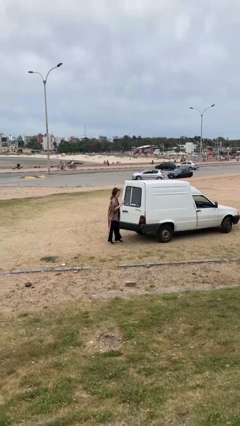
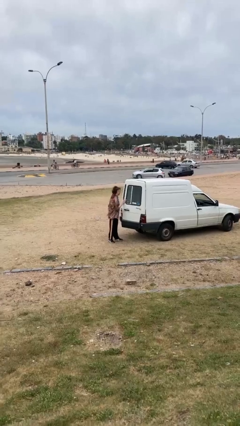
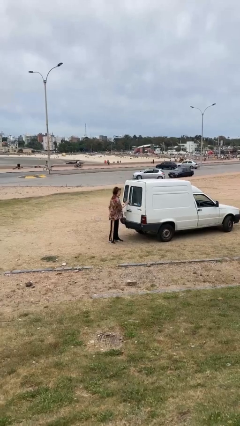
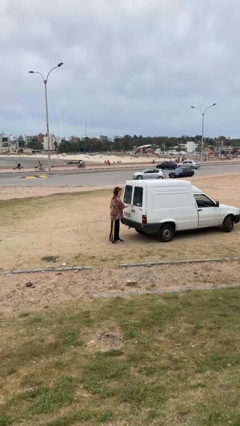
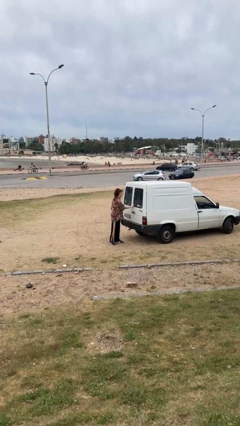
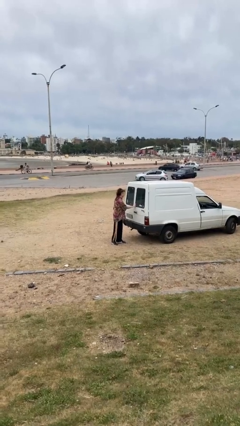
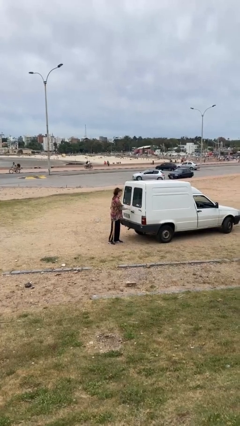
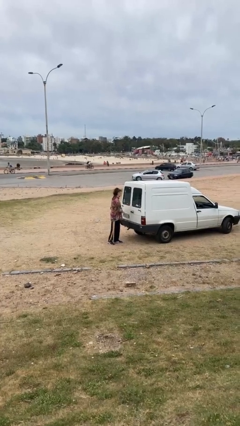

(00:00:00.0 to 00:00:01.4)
person closes car door

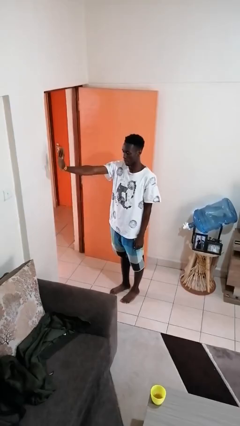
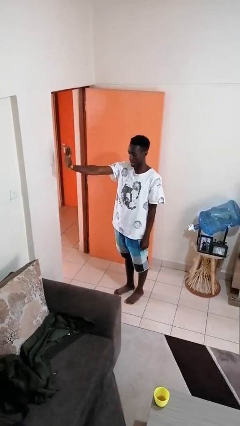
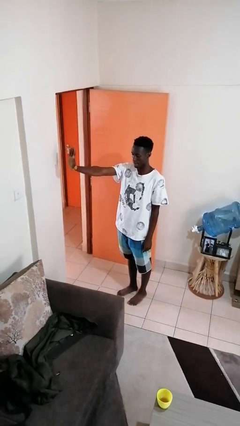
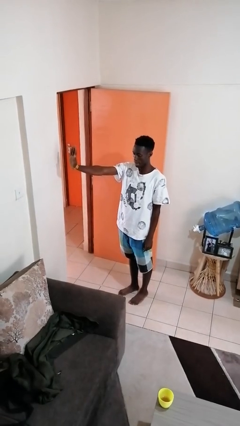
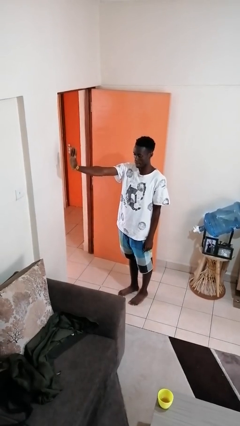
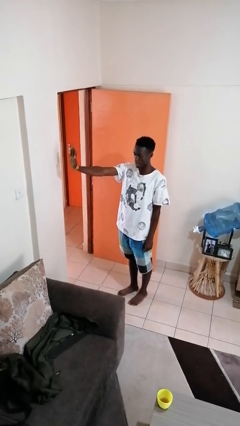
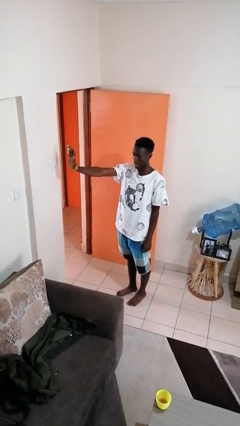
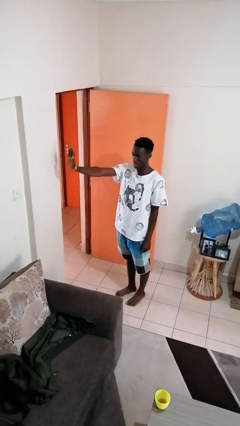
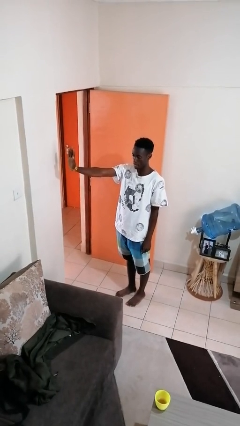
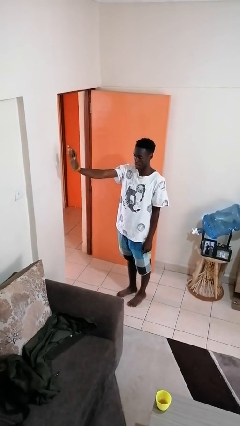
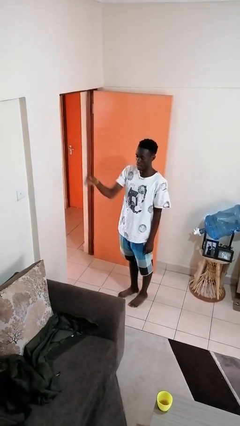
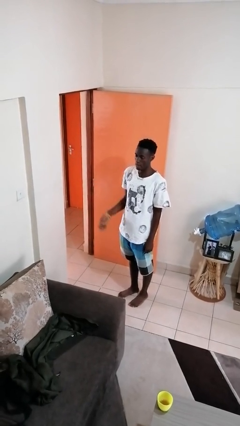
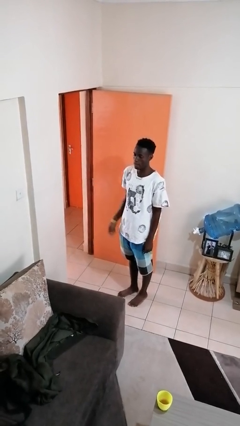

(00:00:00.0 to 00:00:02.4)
person gestures stop

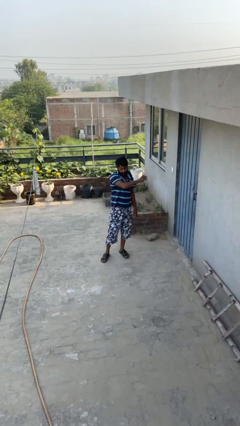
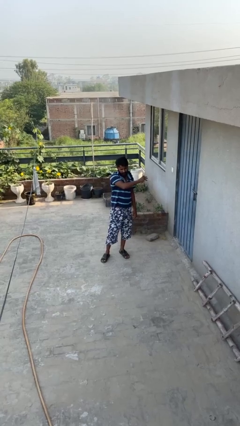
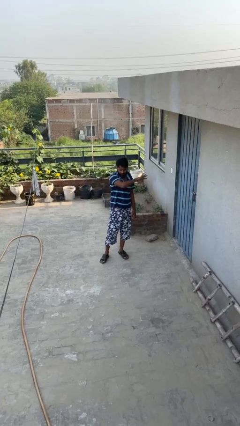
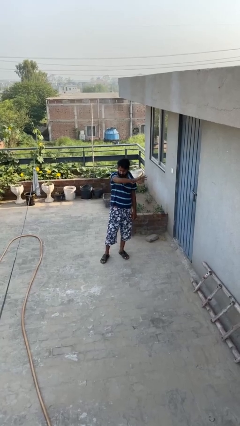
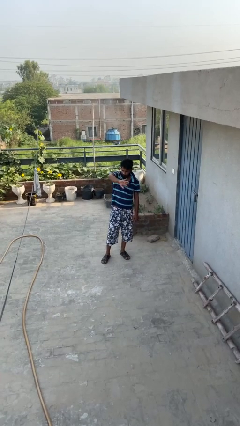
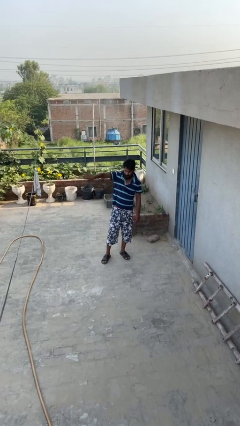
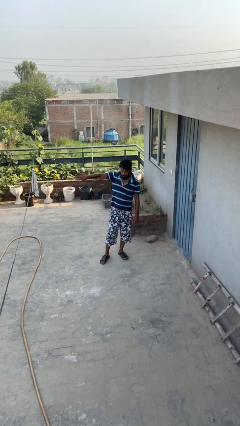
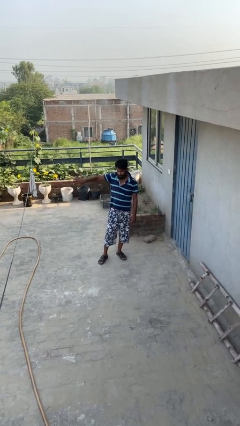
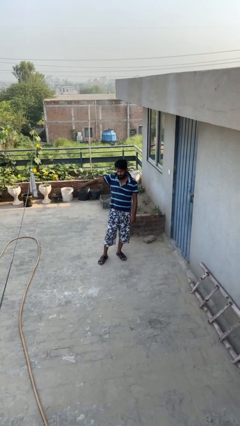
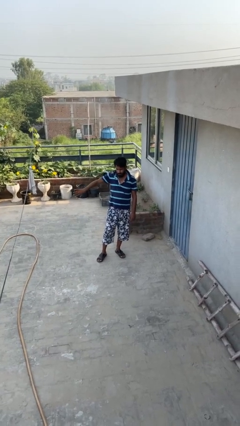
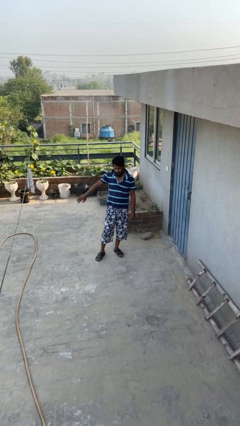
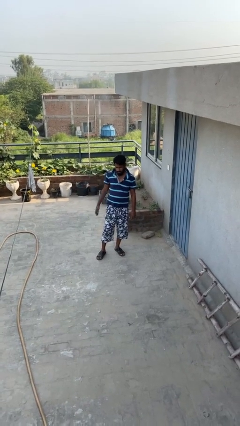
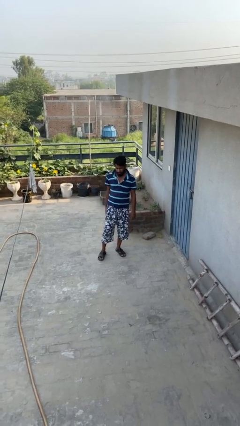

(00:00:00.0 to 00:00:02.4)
person gestures swipe right

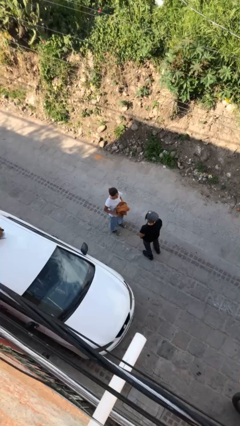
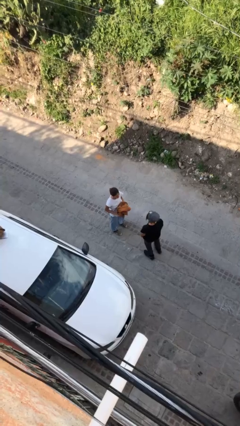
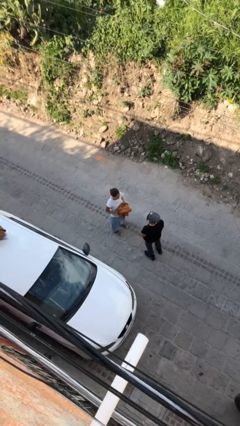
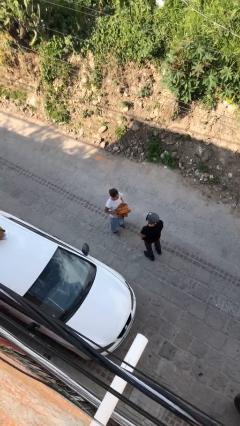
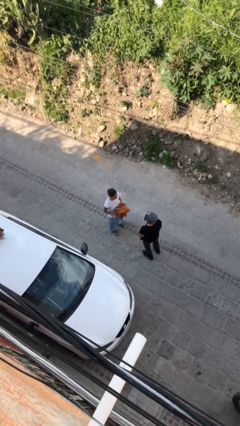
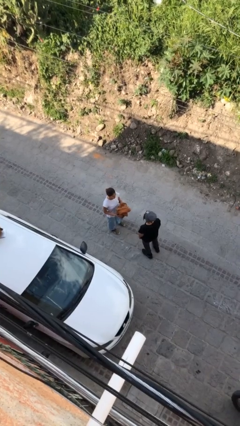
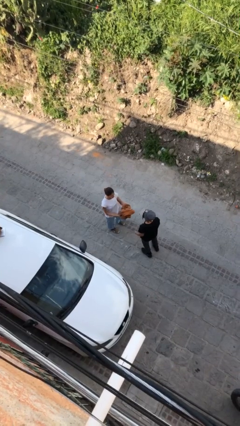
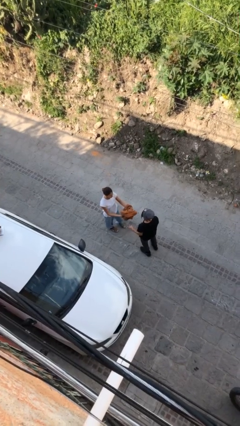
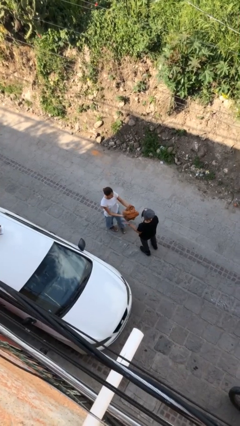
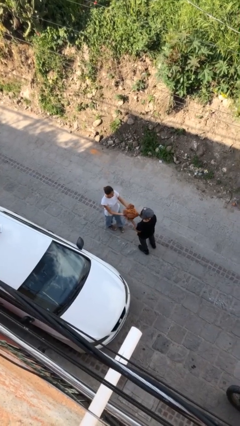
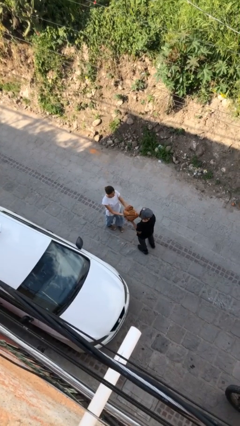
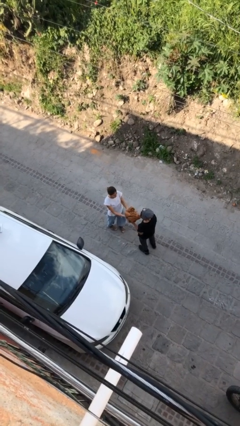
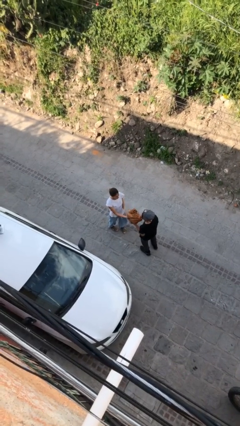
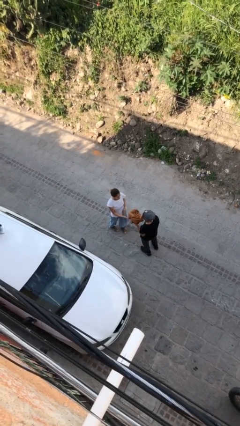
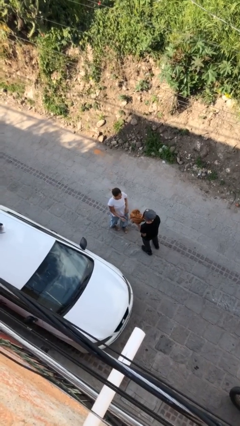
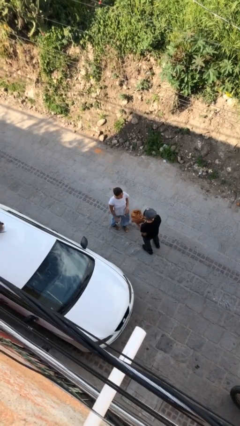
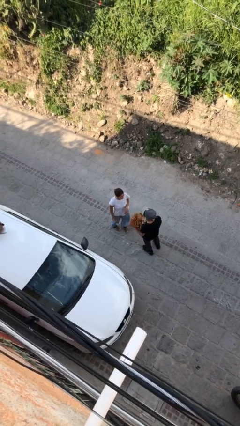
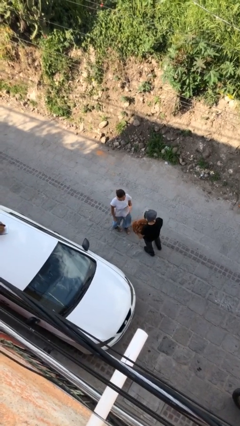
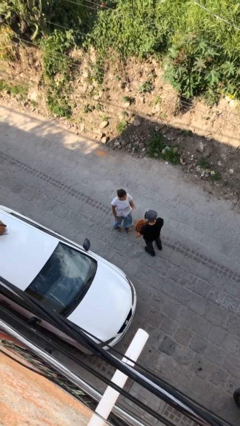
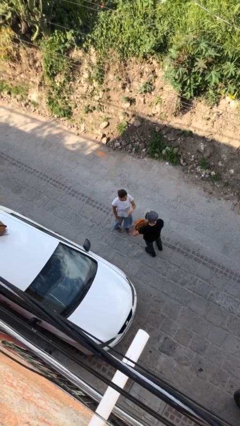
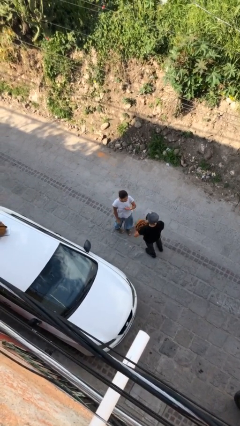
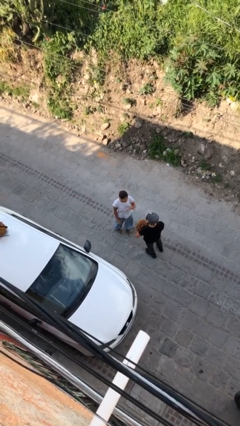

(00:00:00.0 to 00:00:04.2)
person transfers object to person

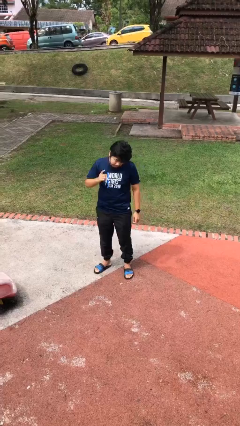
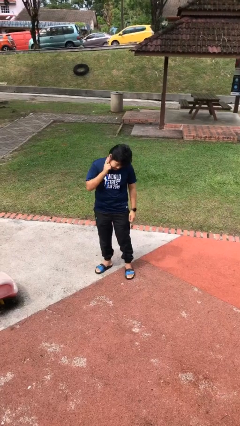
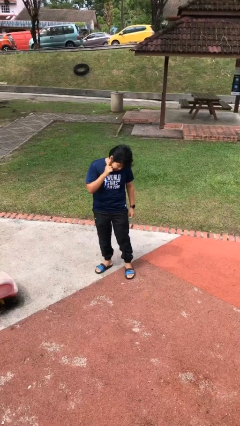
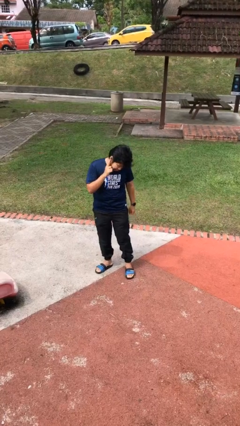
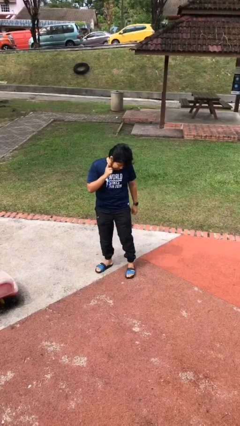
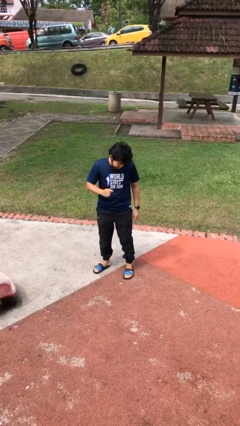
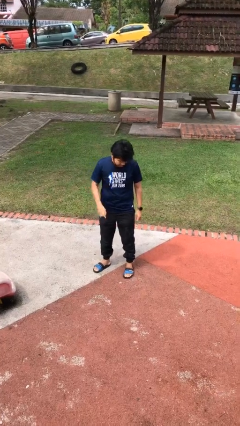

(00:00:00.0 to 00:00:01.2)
person gestures listen closely

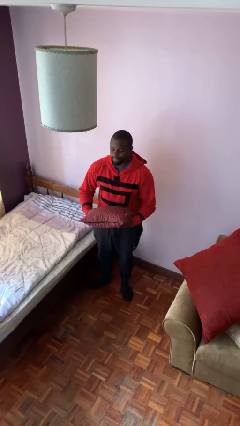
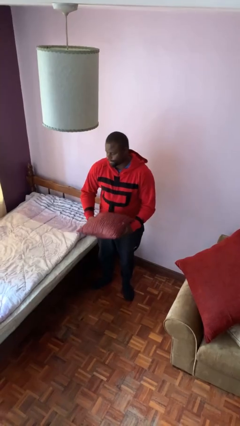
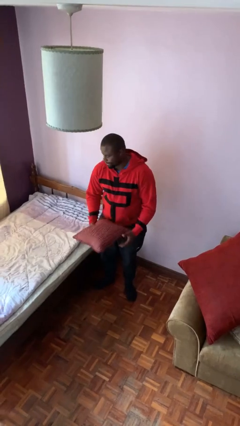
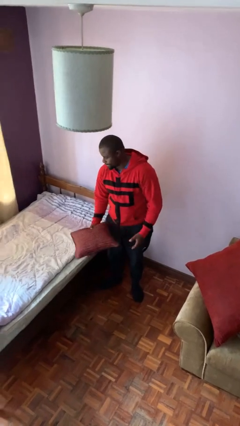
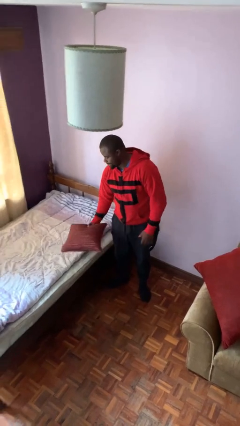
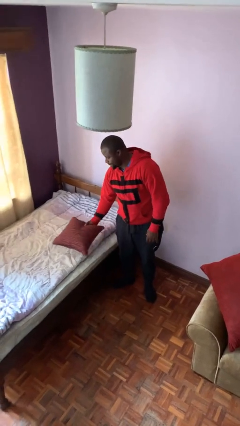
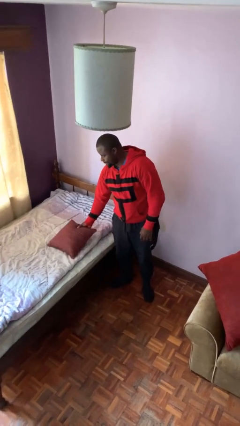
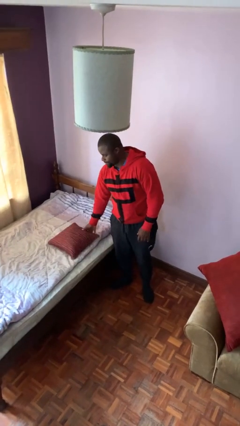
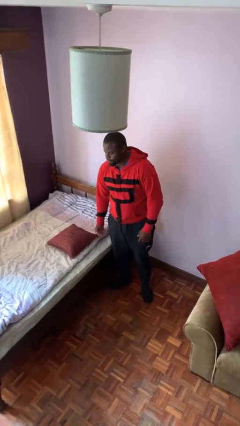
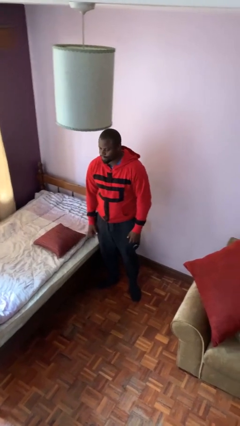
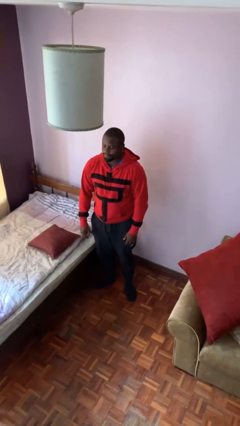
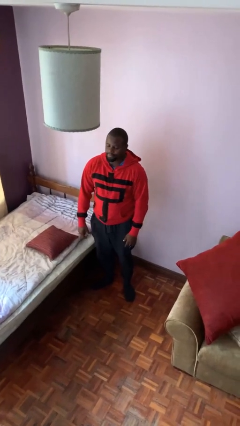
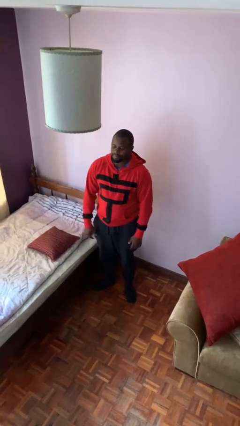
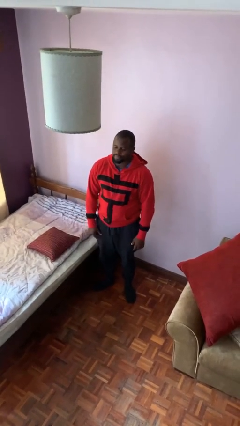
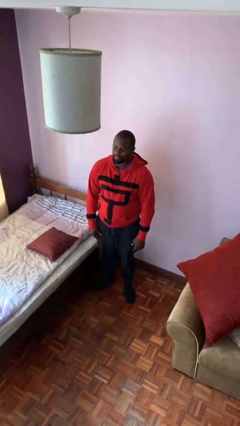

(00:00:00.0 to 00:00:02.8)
person puts down object on bed

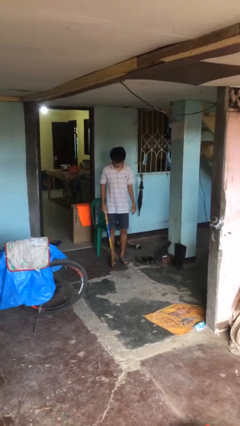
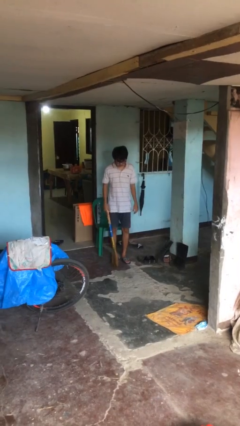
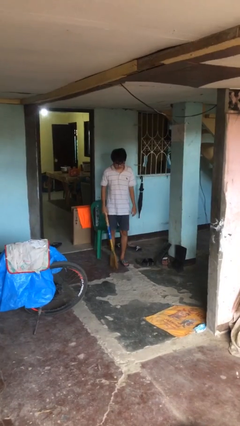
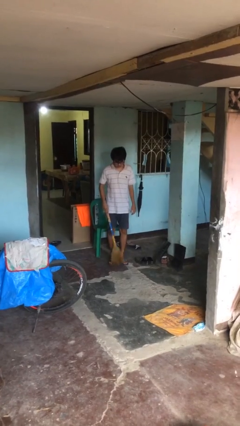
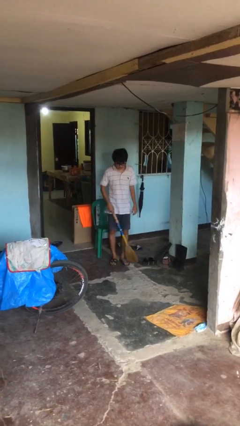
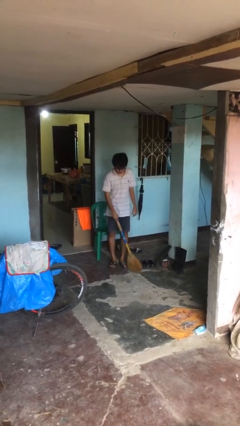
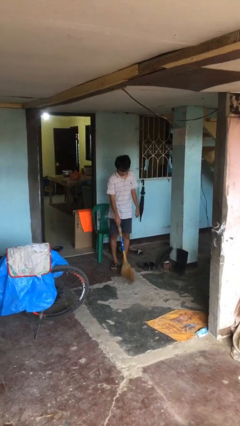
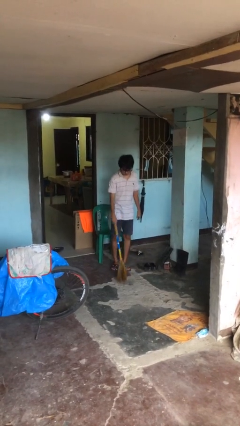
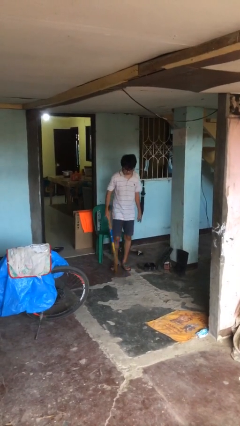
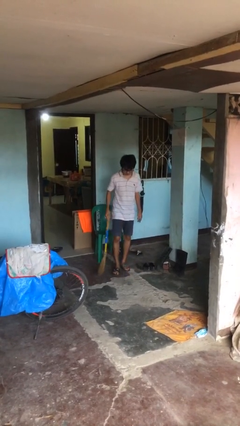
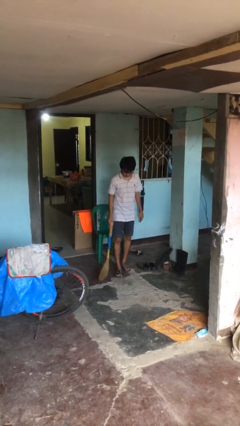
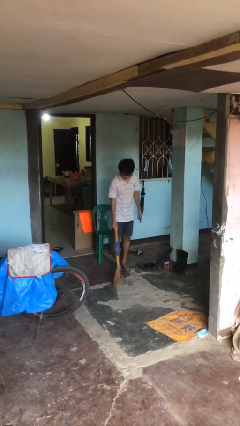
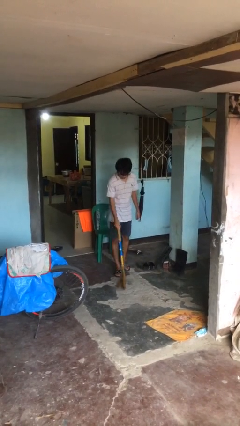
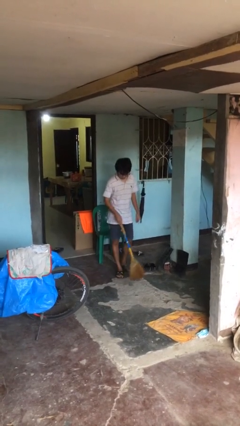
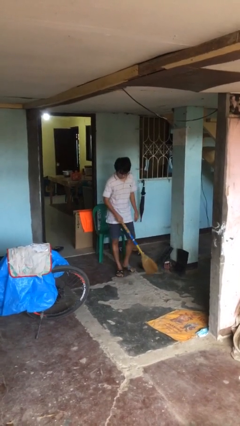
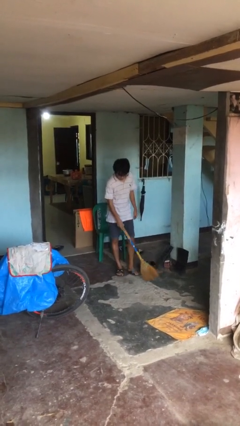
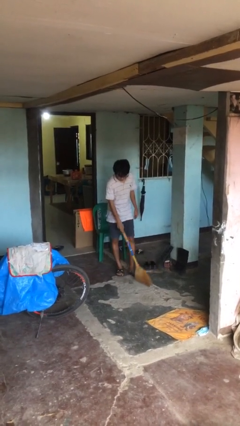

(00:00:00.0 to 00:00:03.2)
person sweeps floor
